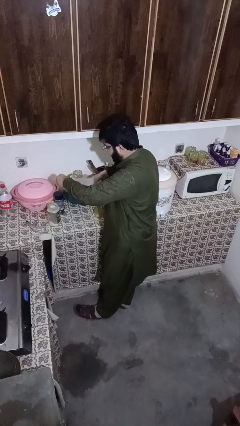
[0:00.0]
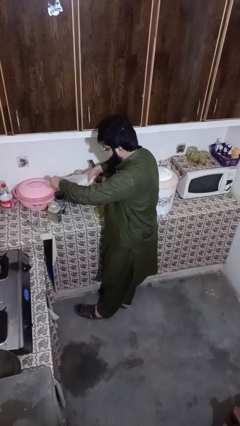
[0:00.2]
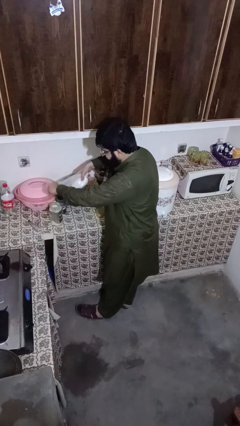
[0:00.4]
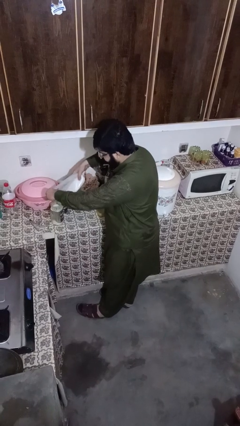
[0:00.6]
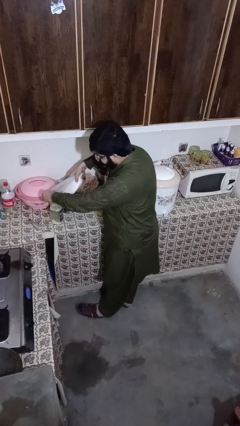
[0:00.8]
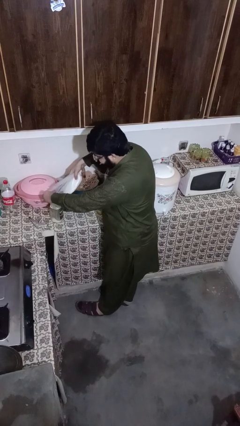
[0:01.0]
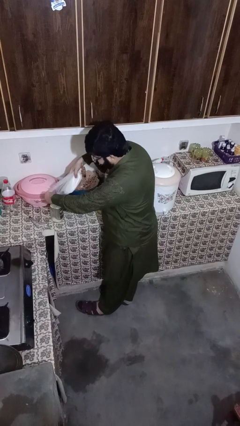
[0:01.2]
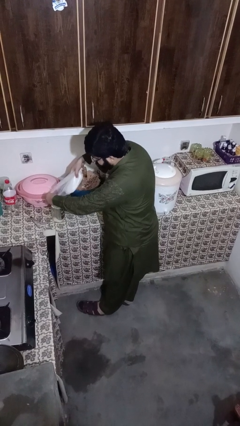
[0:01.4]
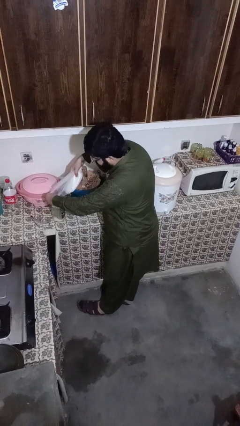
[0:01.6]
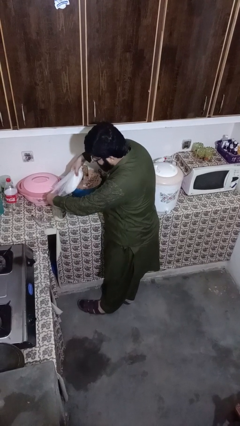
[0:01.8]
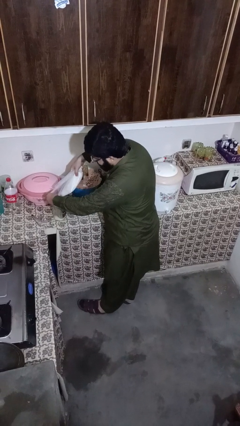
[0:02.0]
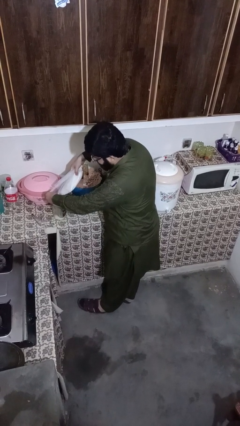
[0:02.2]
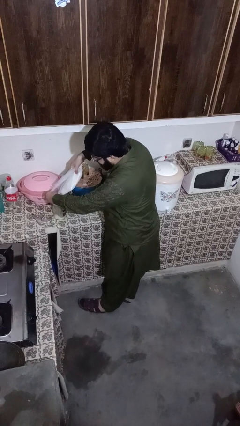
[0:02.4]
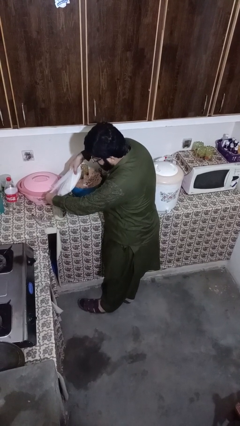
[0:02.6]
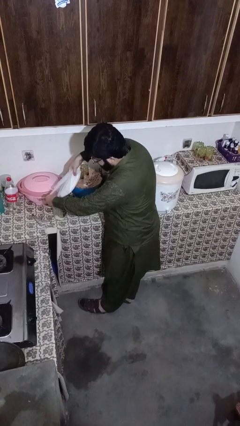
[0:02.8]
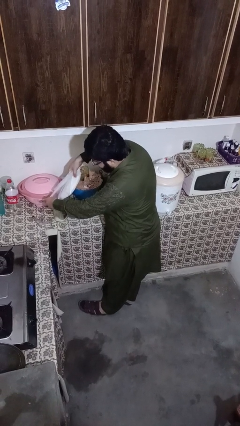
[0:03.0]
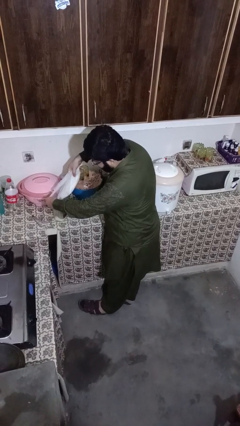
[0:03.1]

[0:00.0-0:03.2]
person pours into bowl

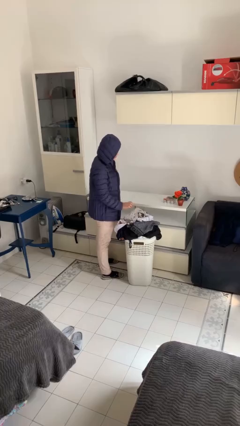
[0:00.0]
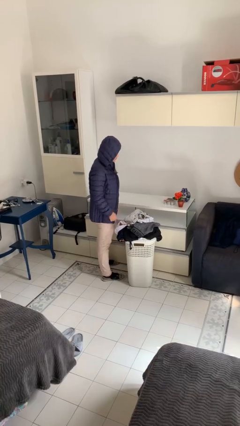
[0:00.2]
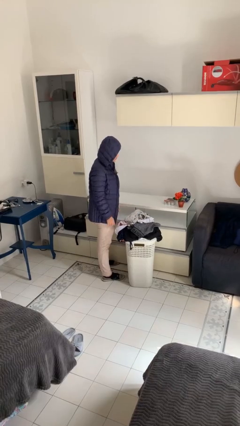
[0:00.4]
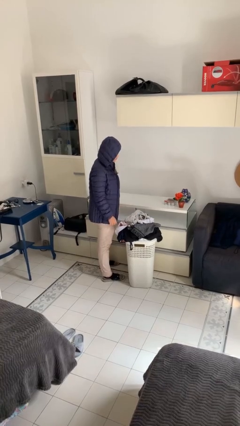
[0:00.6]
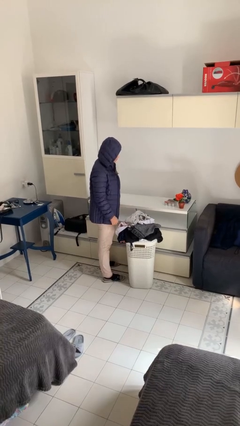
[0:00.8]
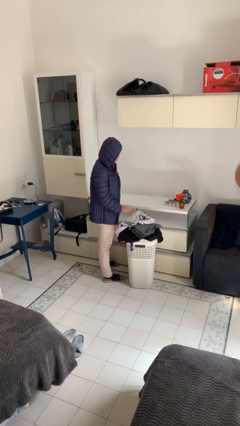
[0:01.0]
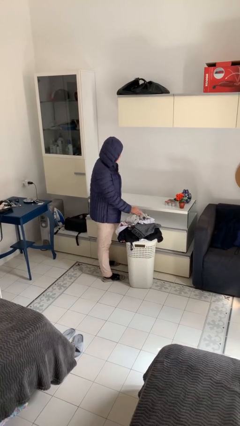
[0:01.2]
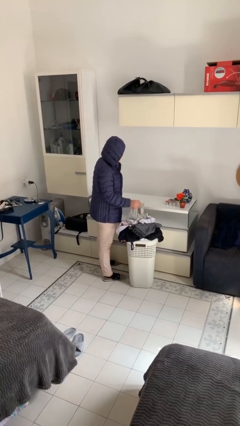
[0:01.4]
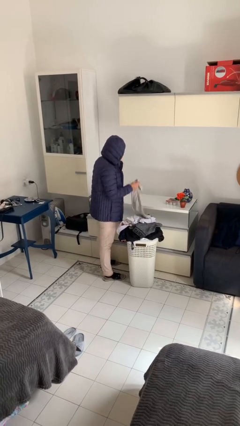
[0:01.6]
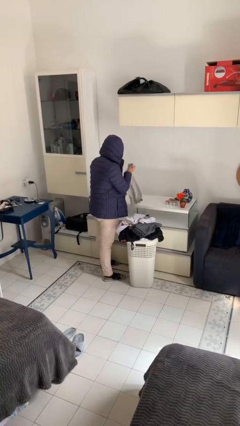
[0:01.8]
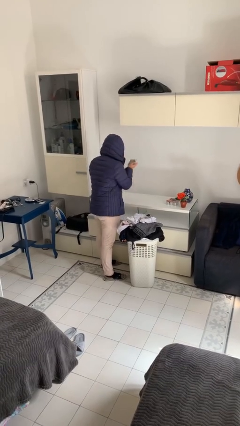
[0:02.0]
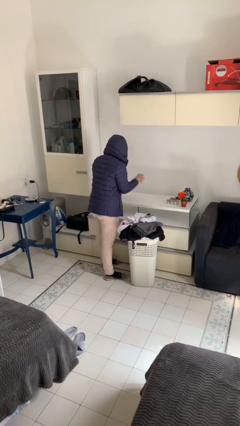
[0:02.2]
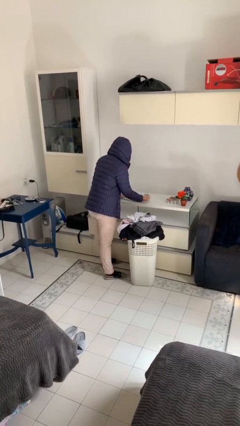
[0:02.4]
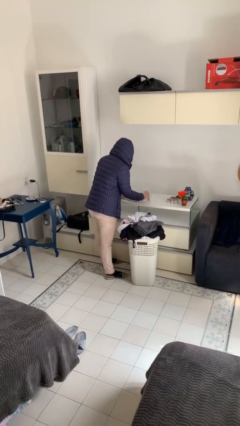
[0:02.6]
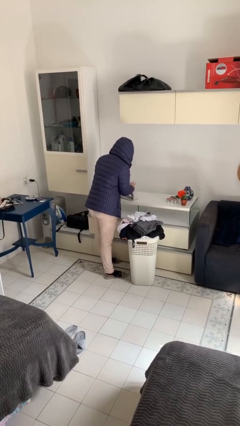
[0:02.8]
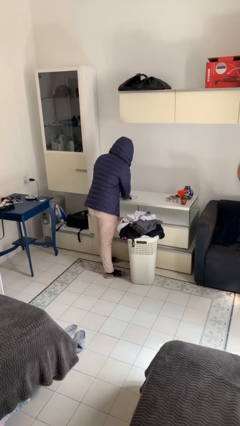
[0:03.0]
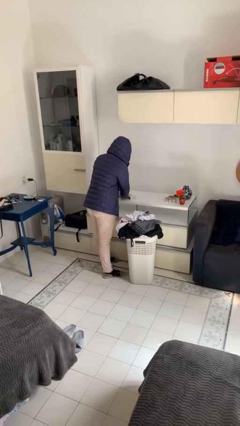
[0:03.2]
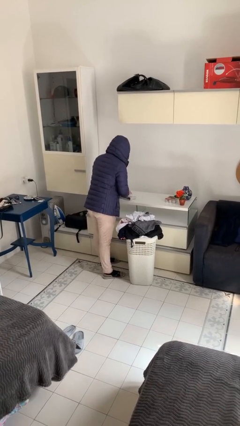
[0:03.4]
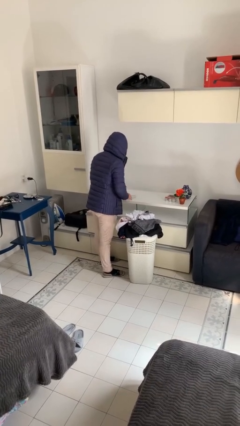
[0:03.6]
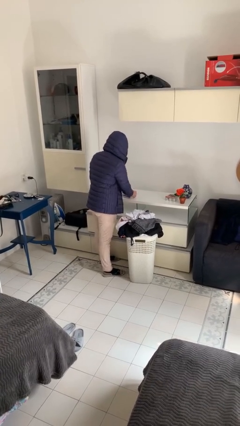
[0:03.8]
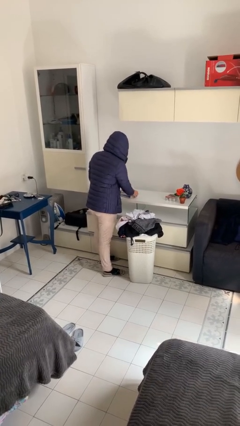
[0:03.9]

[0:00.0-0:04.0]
person folds shirt

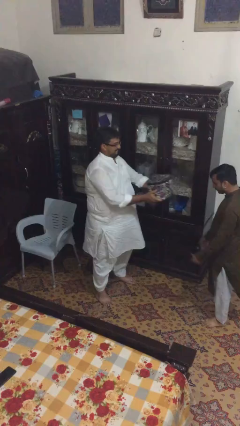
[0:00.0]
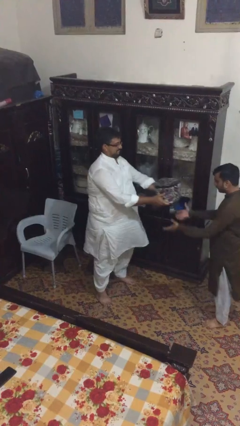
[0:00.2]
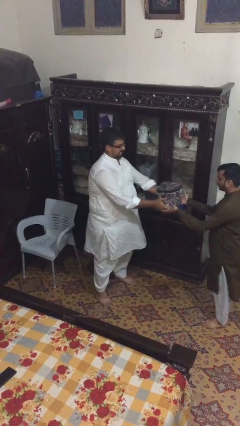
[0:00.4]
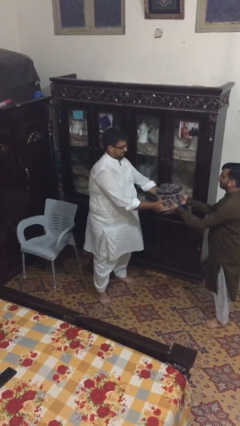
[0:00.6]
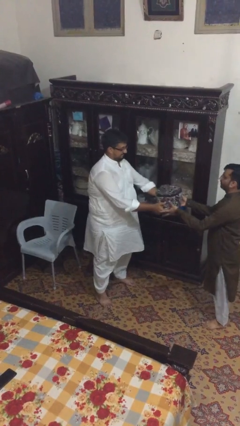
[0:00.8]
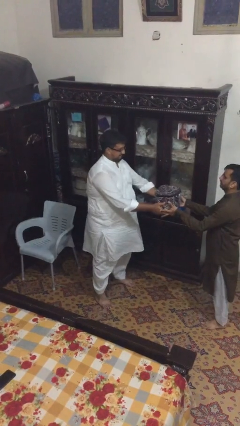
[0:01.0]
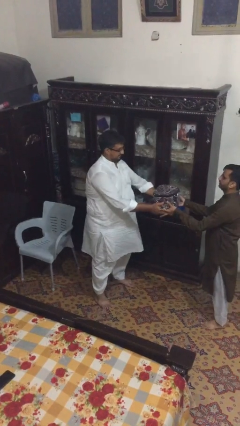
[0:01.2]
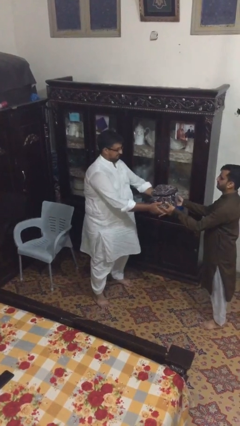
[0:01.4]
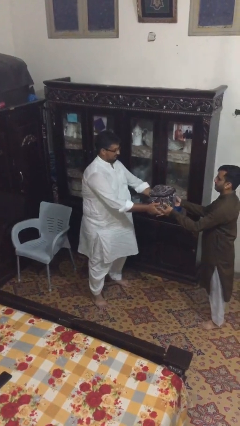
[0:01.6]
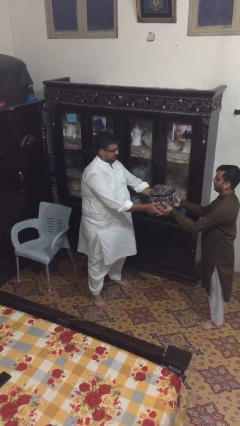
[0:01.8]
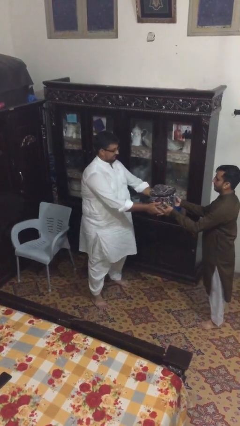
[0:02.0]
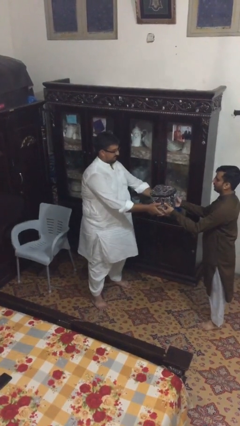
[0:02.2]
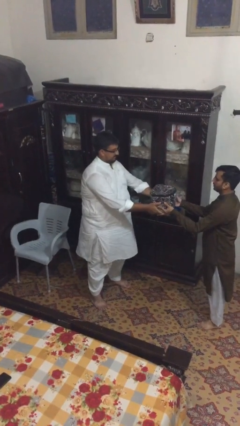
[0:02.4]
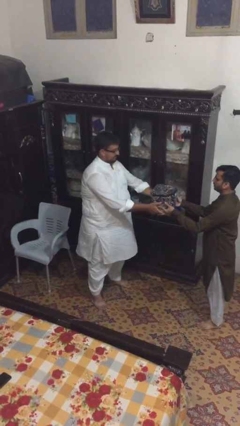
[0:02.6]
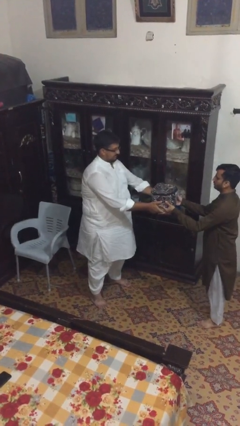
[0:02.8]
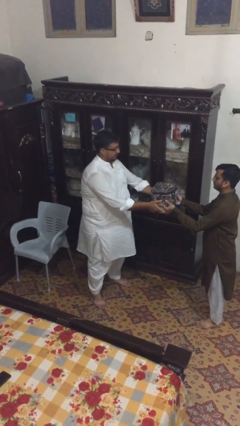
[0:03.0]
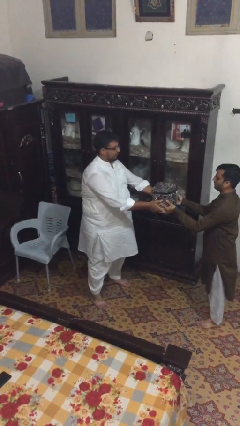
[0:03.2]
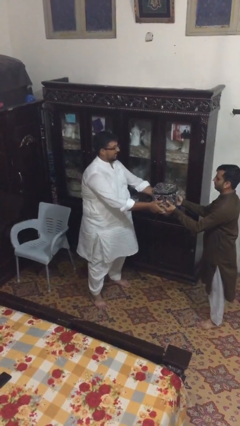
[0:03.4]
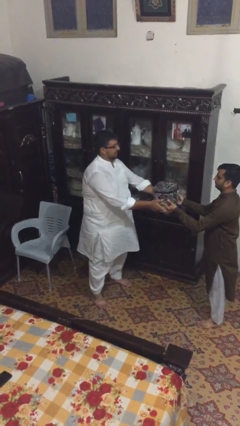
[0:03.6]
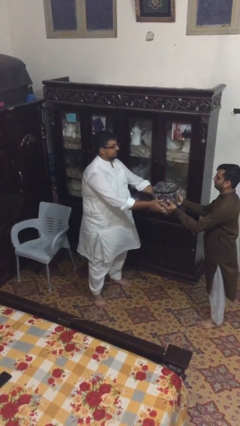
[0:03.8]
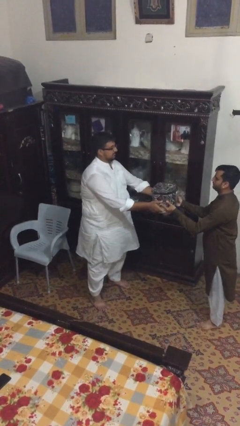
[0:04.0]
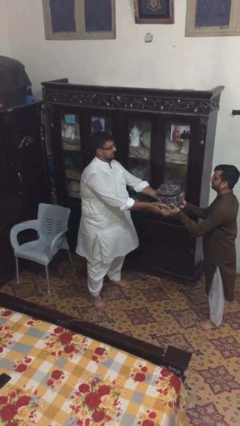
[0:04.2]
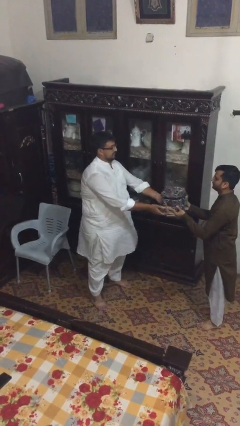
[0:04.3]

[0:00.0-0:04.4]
person transfers object to person

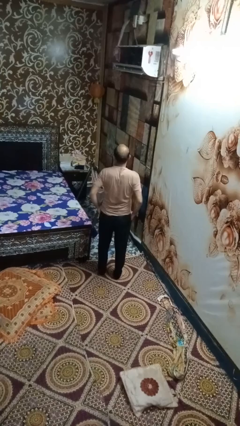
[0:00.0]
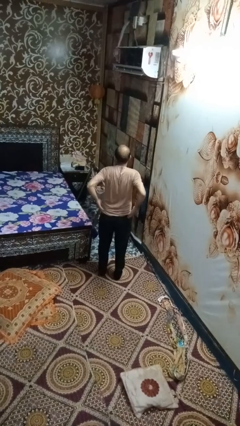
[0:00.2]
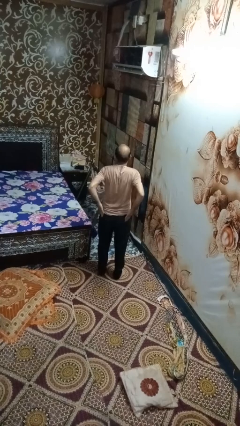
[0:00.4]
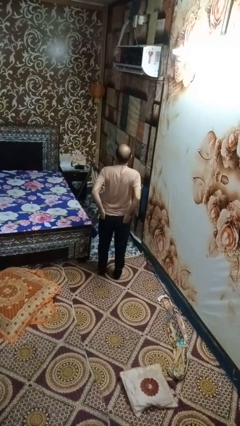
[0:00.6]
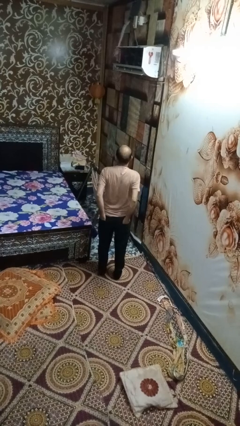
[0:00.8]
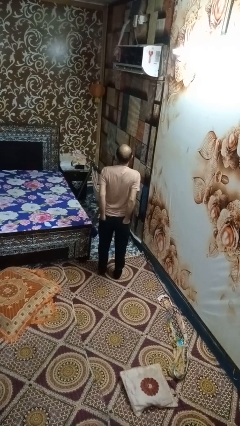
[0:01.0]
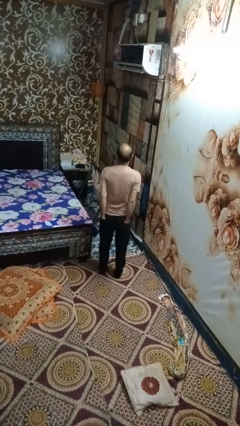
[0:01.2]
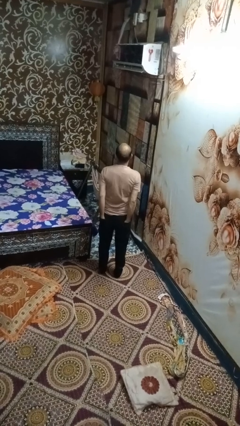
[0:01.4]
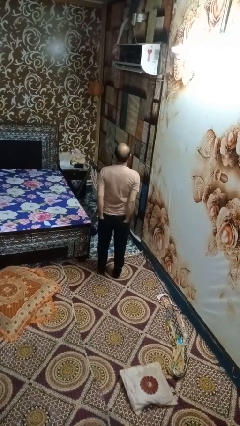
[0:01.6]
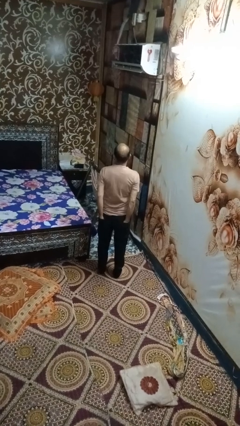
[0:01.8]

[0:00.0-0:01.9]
person puts hands in back pockets

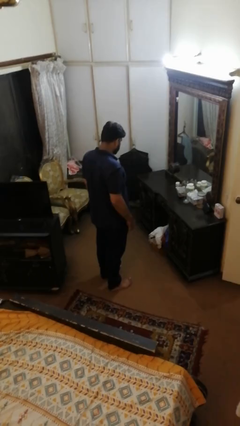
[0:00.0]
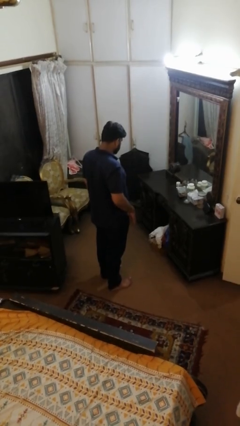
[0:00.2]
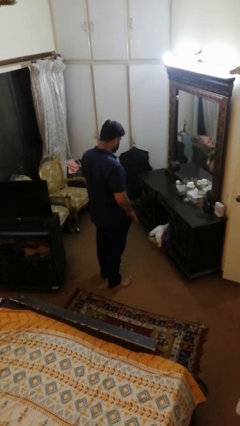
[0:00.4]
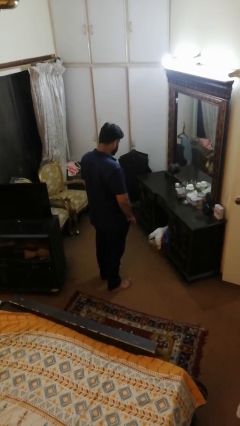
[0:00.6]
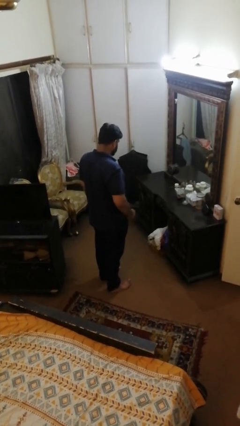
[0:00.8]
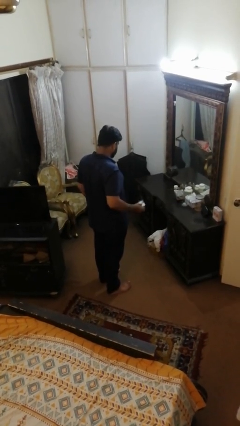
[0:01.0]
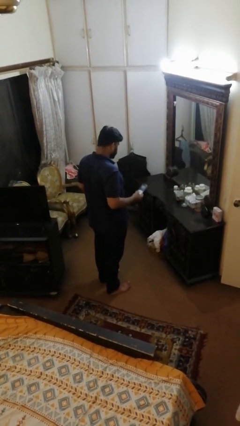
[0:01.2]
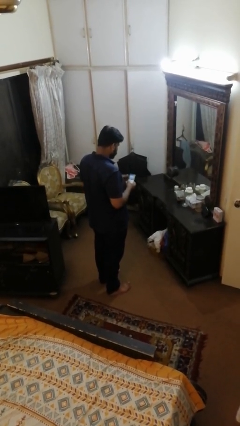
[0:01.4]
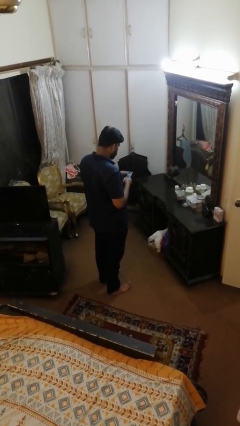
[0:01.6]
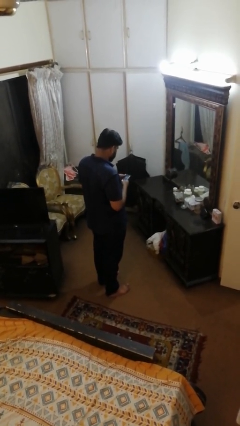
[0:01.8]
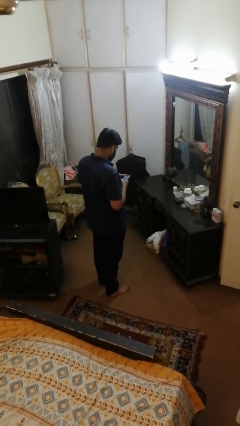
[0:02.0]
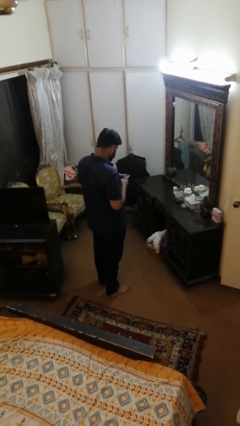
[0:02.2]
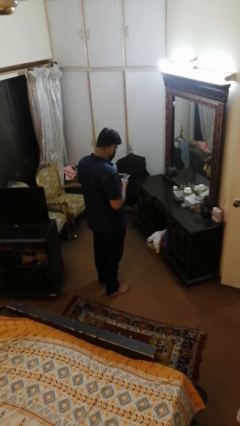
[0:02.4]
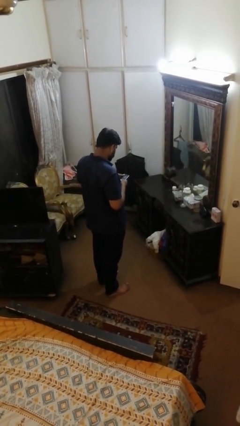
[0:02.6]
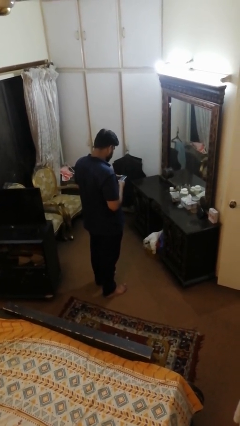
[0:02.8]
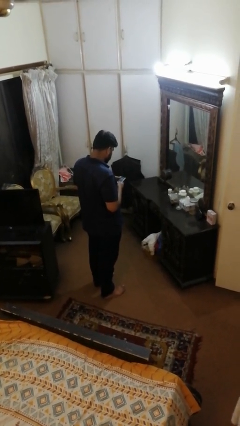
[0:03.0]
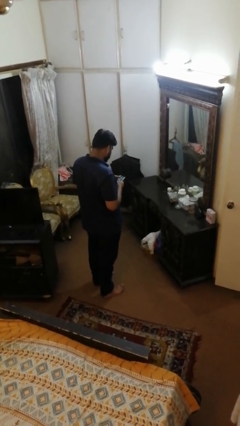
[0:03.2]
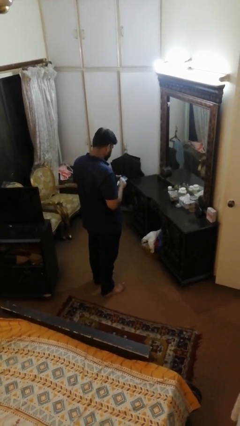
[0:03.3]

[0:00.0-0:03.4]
person takes phone from pocket

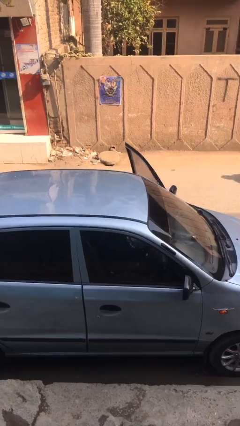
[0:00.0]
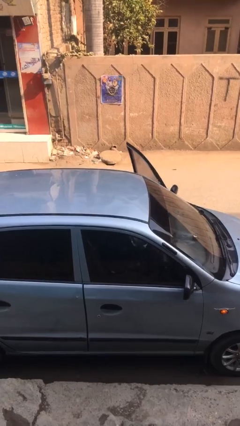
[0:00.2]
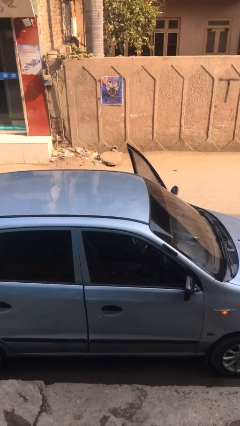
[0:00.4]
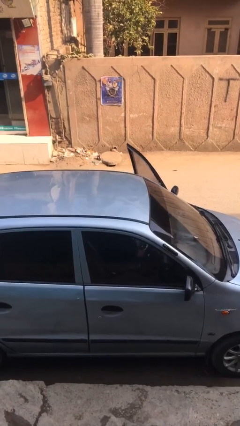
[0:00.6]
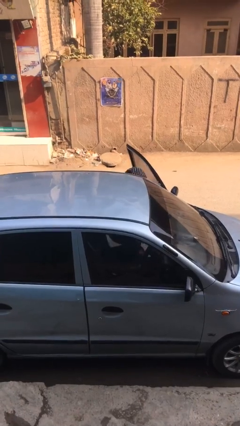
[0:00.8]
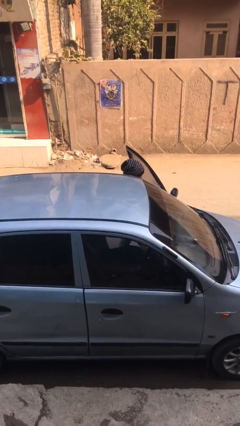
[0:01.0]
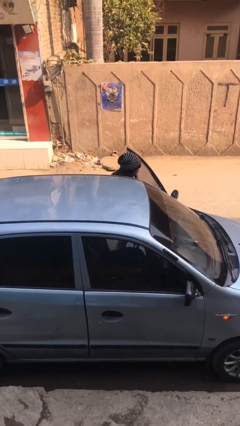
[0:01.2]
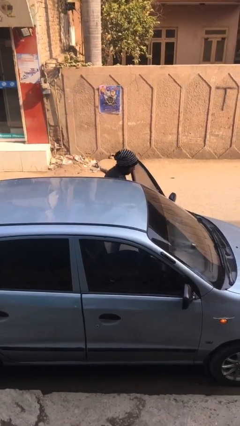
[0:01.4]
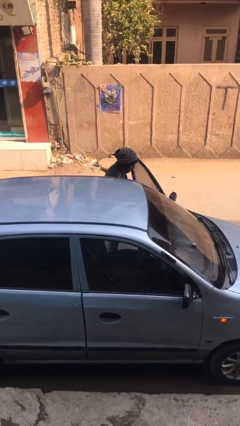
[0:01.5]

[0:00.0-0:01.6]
person exits car
